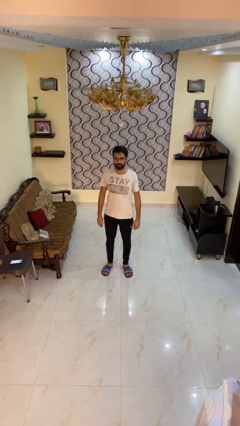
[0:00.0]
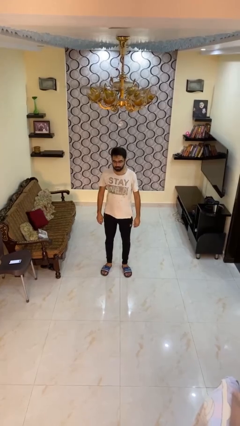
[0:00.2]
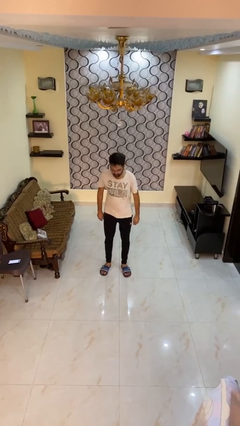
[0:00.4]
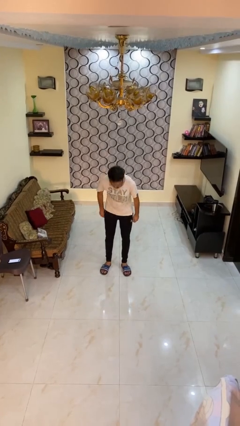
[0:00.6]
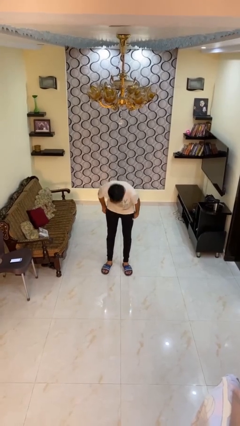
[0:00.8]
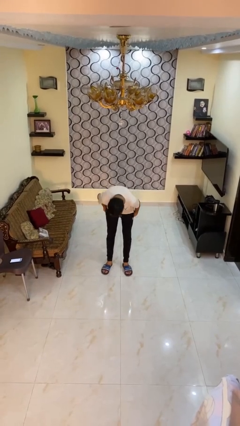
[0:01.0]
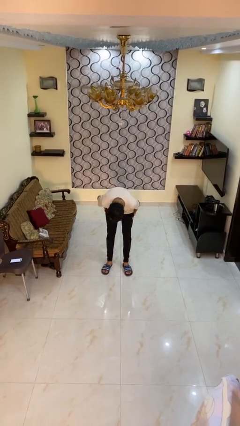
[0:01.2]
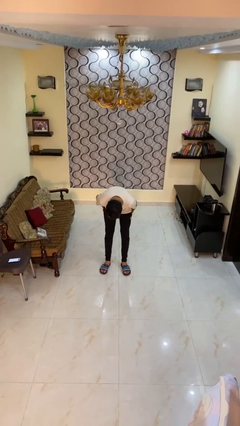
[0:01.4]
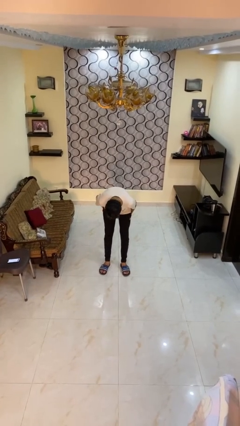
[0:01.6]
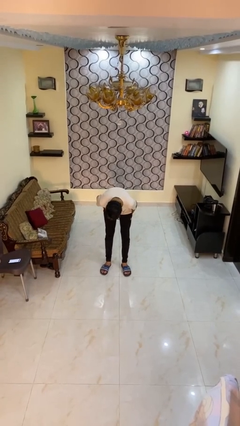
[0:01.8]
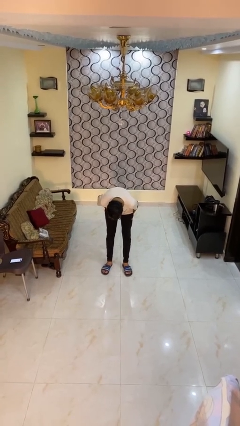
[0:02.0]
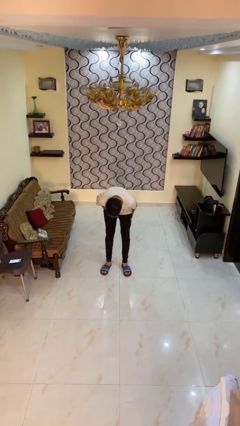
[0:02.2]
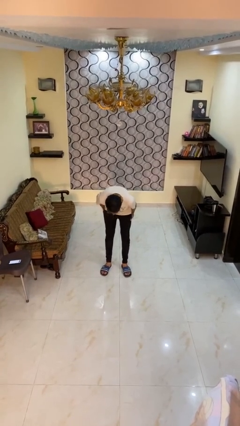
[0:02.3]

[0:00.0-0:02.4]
person bows

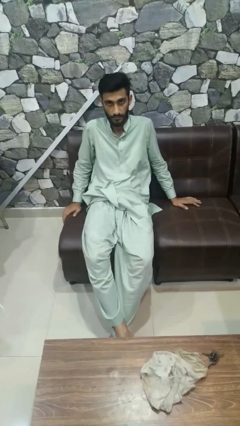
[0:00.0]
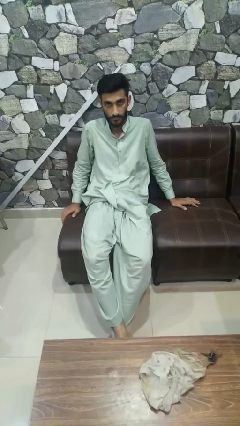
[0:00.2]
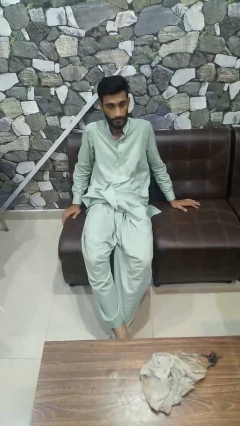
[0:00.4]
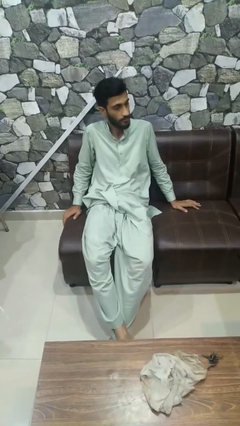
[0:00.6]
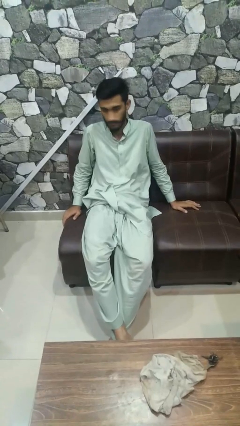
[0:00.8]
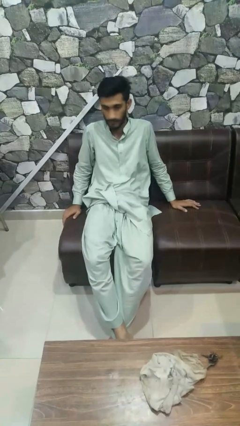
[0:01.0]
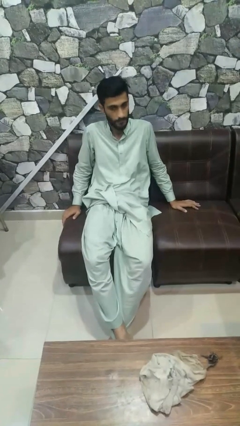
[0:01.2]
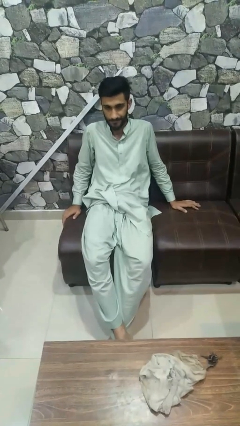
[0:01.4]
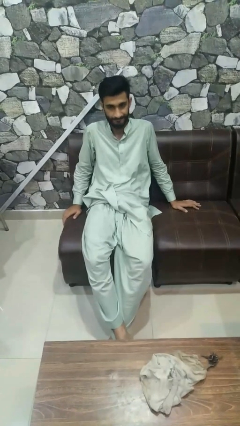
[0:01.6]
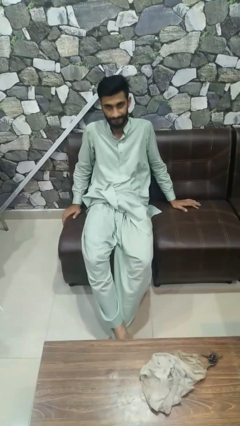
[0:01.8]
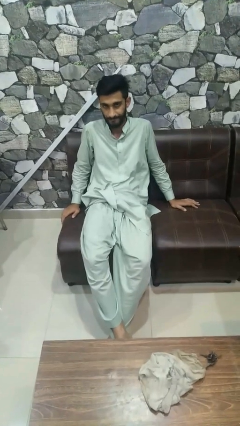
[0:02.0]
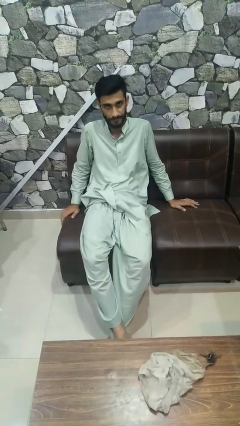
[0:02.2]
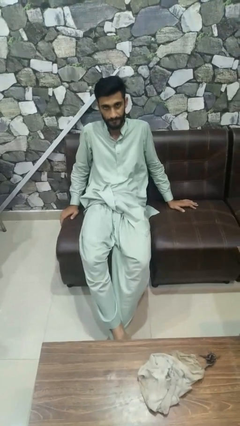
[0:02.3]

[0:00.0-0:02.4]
person shakes head

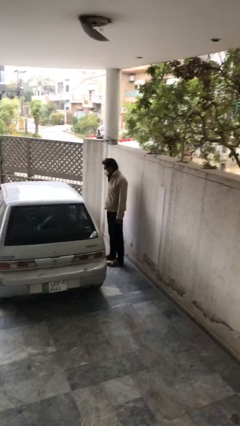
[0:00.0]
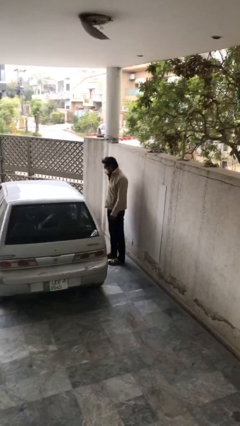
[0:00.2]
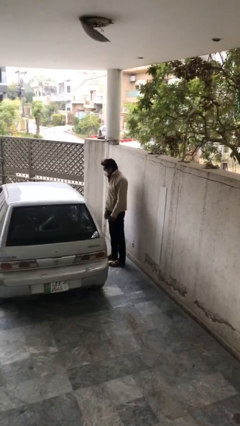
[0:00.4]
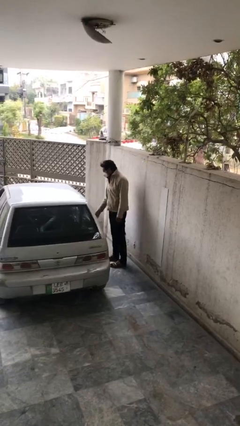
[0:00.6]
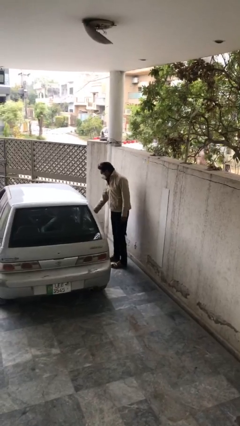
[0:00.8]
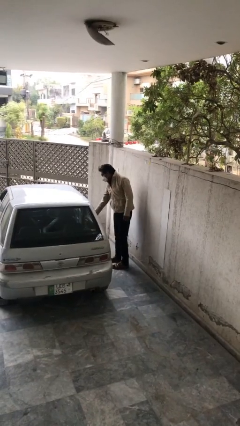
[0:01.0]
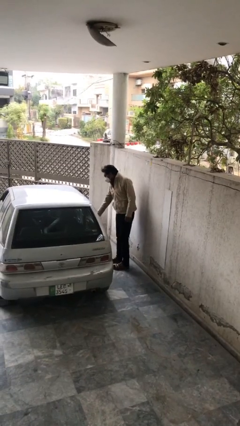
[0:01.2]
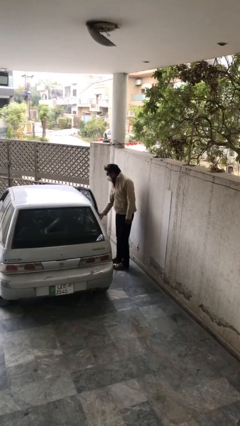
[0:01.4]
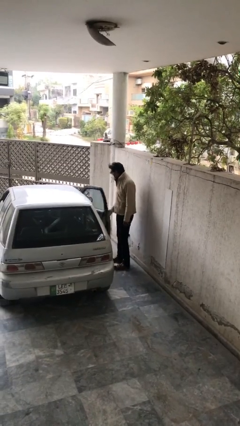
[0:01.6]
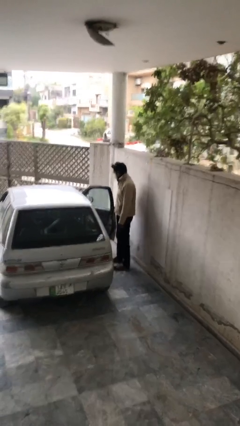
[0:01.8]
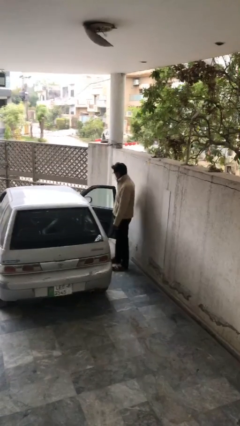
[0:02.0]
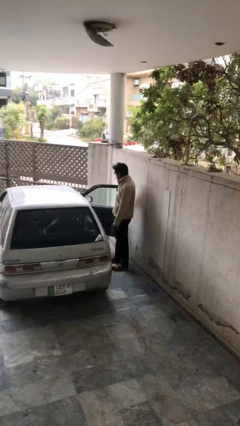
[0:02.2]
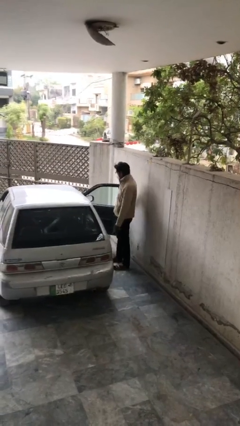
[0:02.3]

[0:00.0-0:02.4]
person opens car door

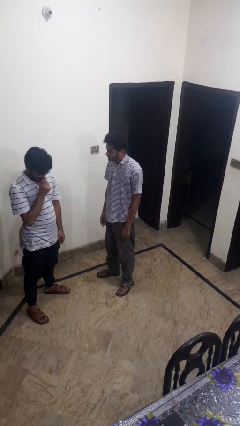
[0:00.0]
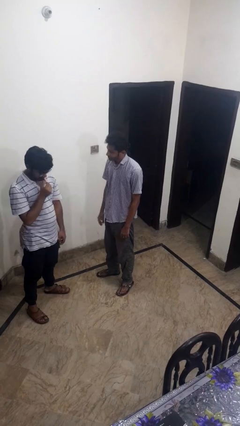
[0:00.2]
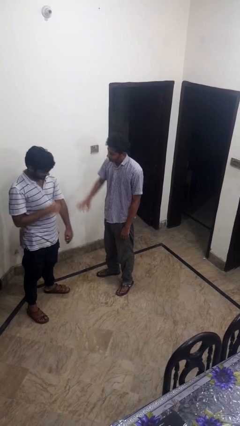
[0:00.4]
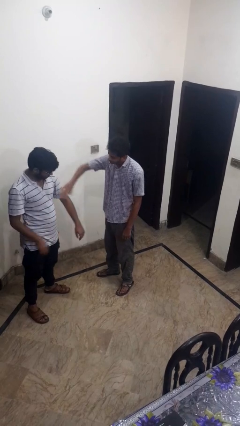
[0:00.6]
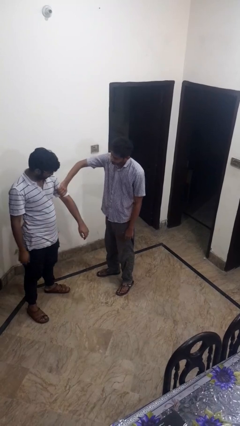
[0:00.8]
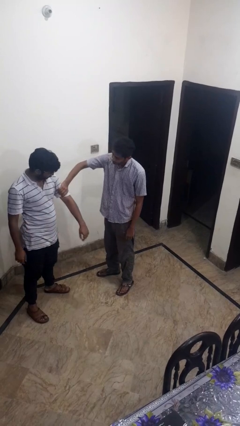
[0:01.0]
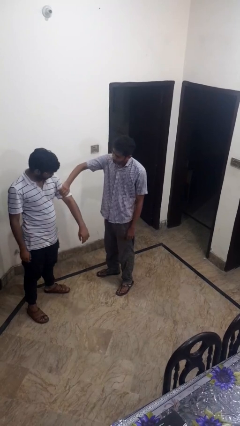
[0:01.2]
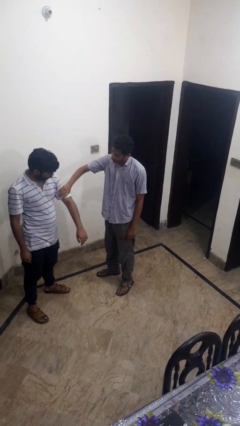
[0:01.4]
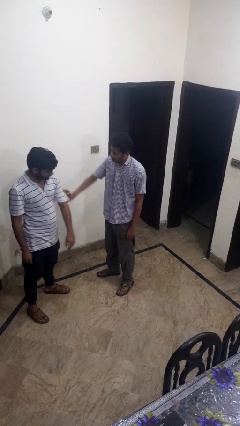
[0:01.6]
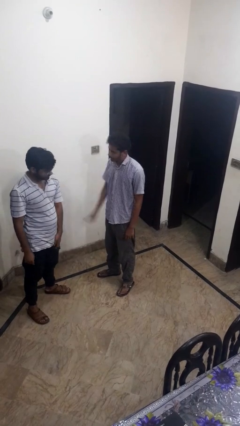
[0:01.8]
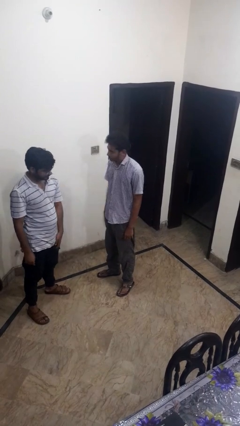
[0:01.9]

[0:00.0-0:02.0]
person grabs person by bicep

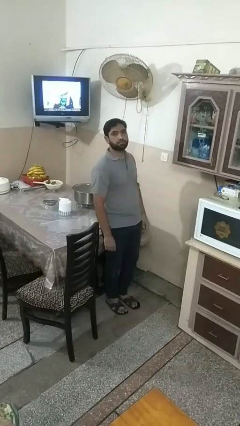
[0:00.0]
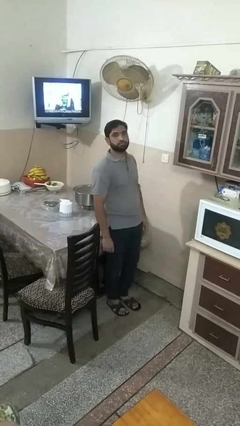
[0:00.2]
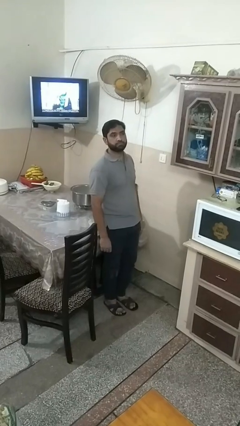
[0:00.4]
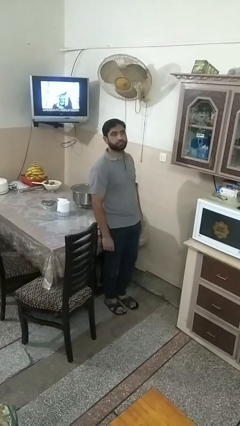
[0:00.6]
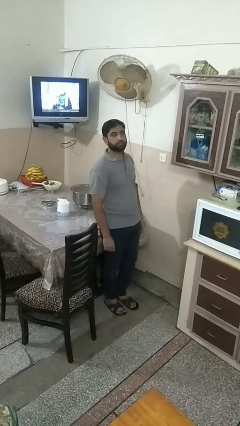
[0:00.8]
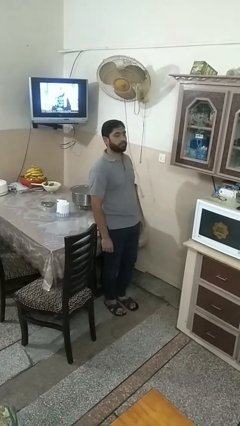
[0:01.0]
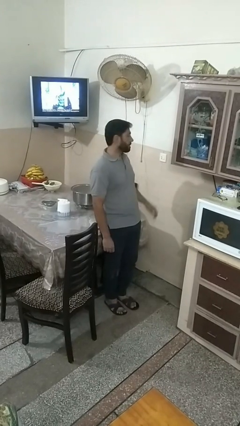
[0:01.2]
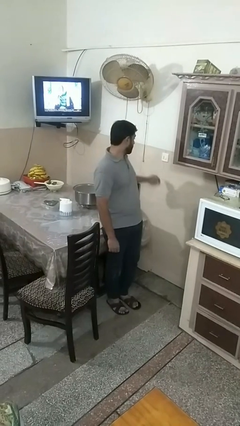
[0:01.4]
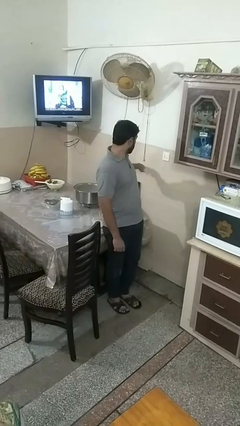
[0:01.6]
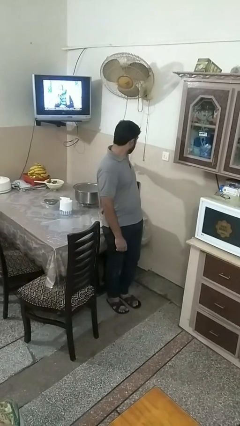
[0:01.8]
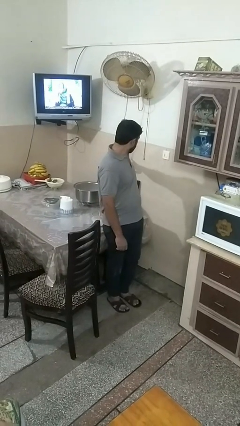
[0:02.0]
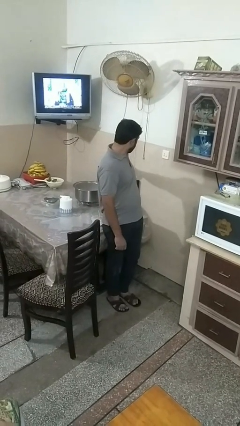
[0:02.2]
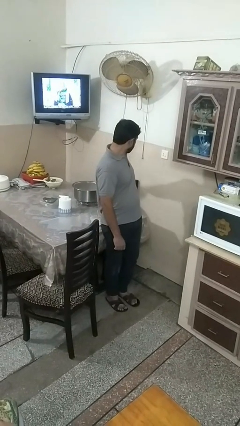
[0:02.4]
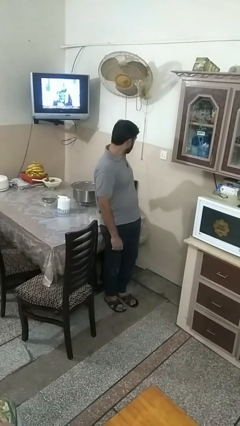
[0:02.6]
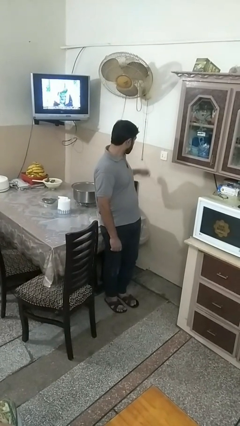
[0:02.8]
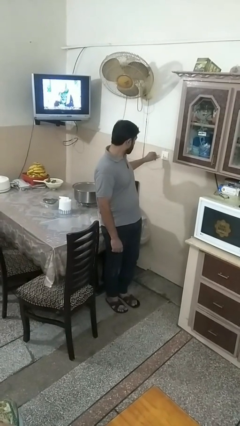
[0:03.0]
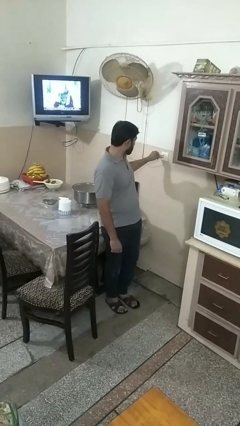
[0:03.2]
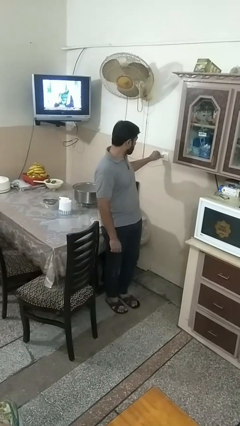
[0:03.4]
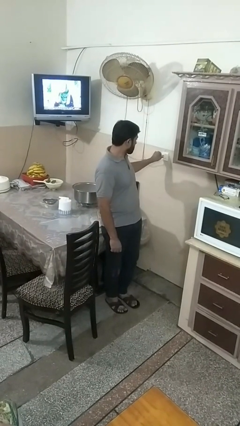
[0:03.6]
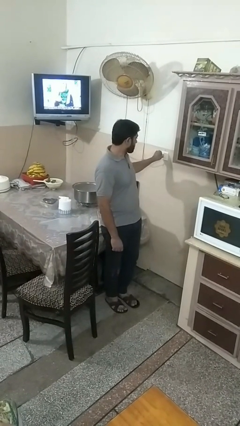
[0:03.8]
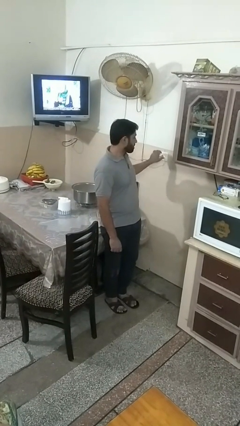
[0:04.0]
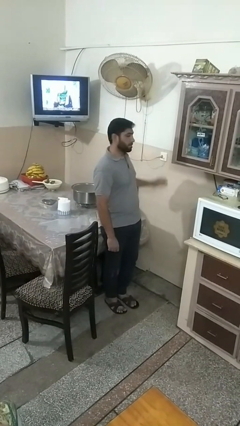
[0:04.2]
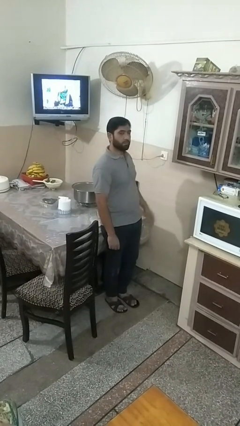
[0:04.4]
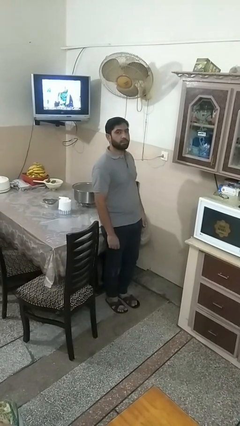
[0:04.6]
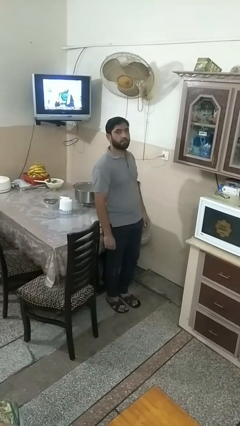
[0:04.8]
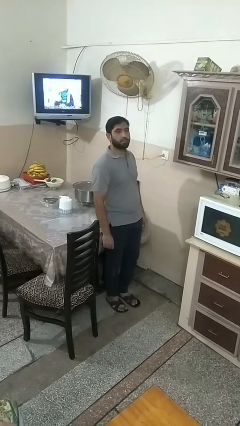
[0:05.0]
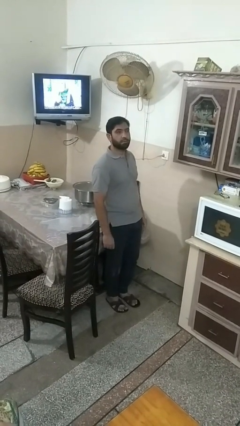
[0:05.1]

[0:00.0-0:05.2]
person plugs into electrical socket

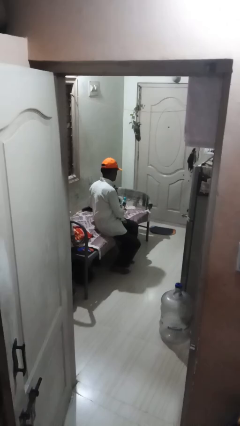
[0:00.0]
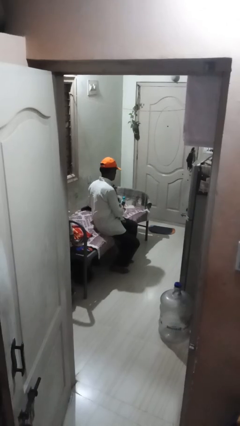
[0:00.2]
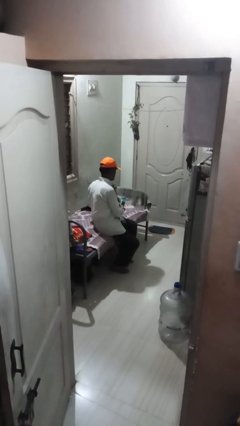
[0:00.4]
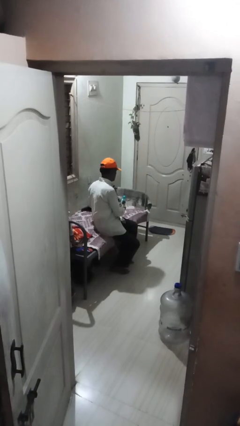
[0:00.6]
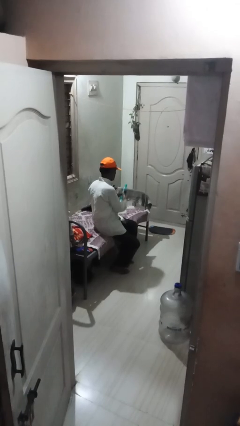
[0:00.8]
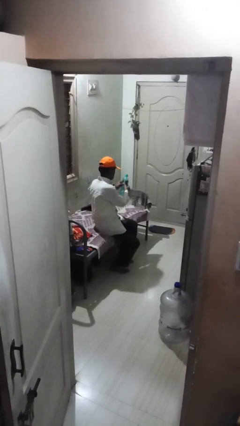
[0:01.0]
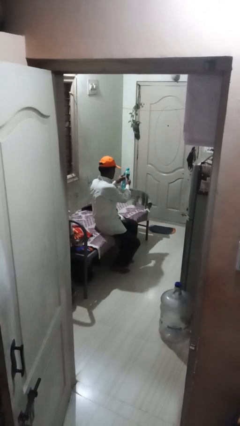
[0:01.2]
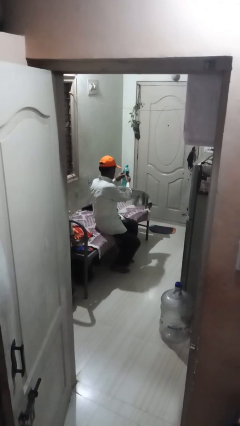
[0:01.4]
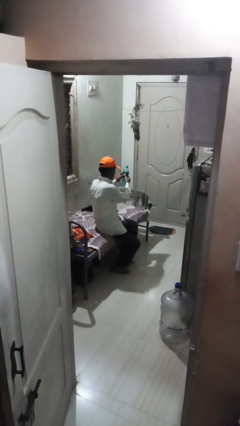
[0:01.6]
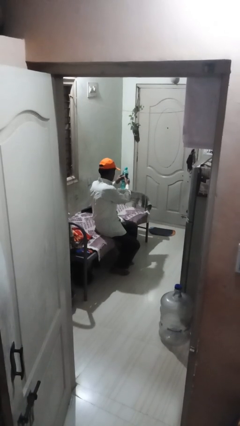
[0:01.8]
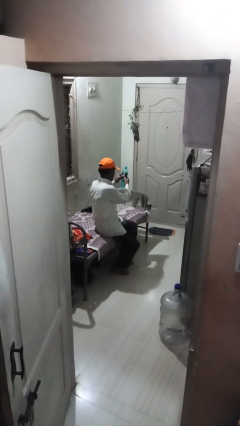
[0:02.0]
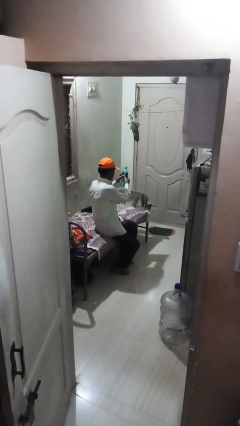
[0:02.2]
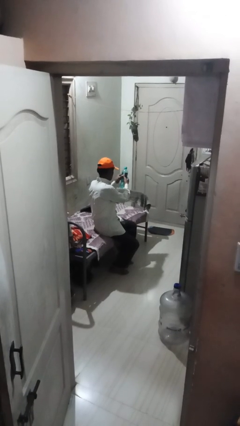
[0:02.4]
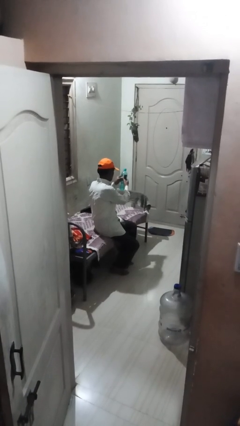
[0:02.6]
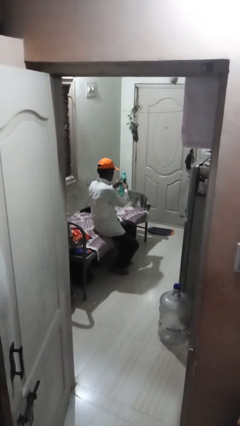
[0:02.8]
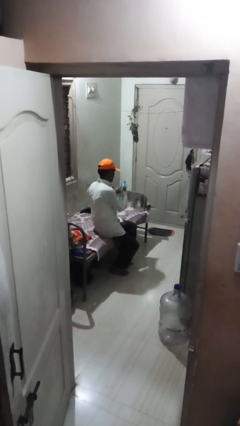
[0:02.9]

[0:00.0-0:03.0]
person squeezes object

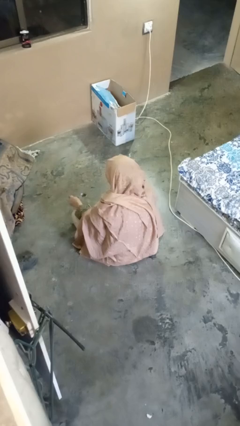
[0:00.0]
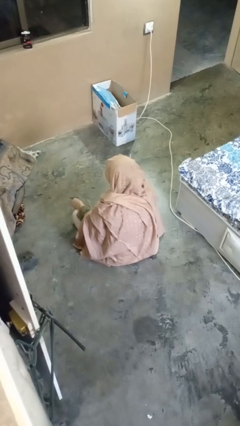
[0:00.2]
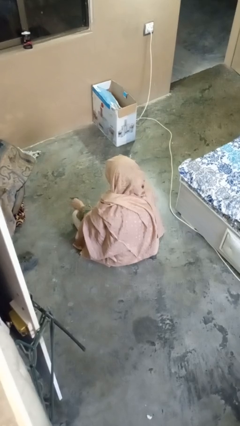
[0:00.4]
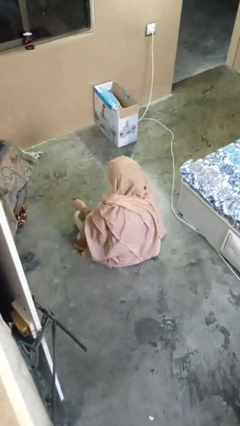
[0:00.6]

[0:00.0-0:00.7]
person takes off glasses
